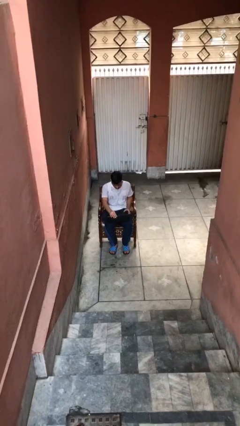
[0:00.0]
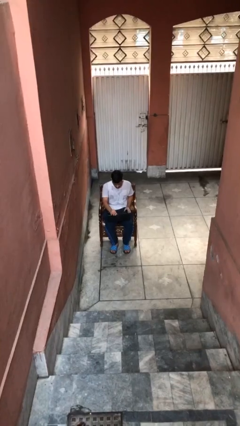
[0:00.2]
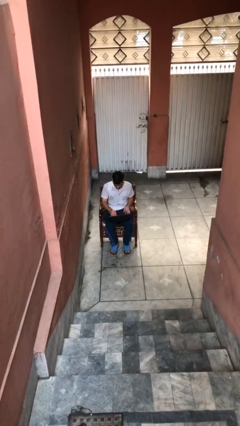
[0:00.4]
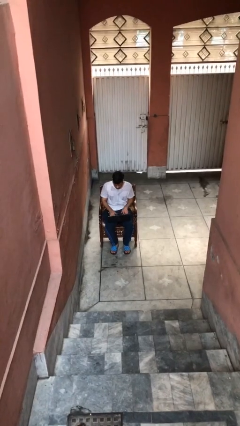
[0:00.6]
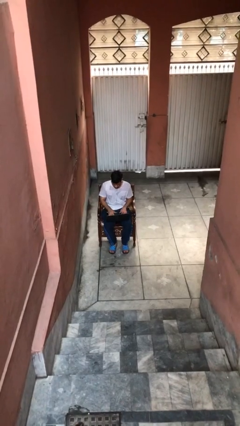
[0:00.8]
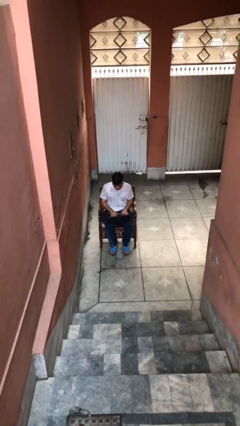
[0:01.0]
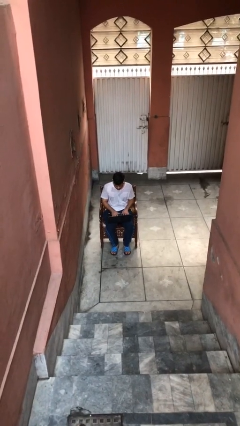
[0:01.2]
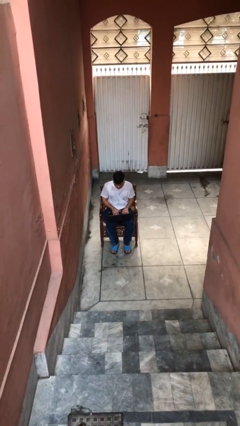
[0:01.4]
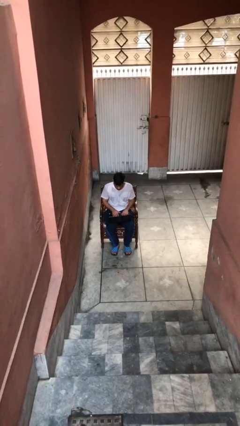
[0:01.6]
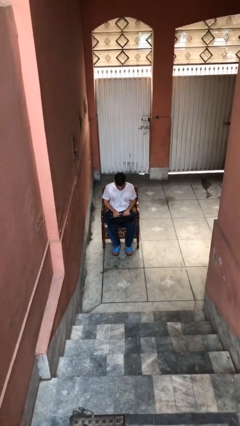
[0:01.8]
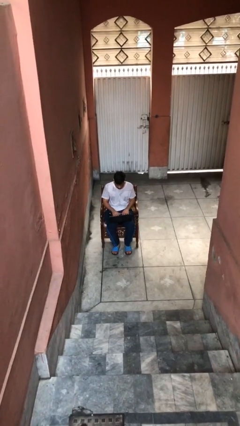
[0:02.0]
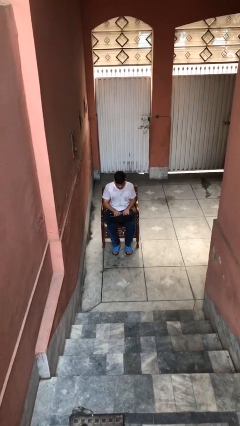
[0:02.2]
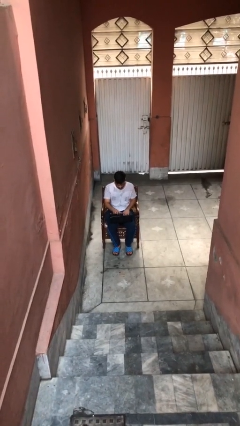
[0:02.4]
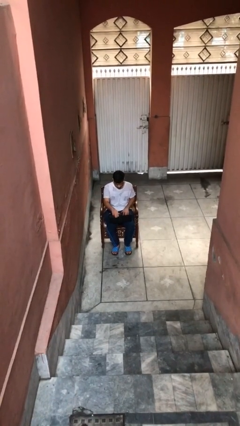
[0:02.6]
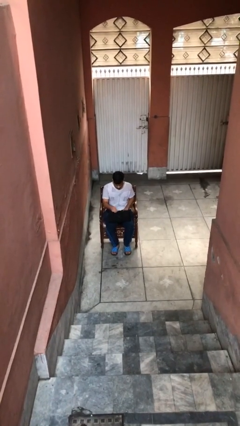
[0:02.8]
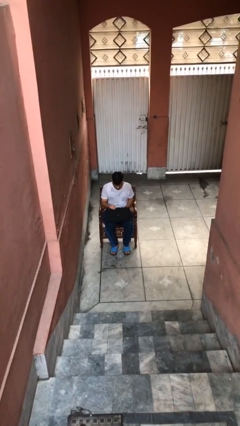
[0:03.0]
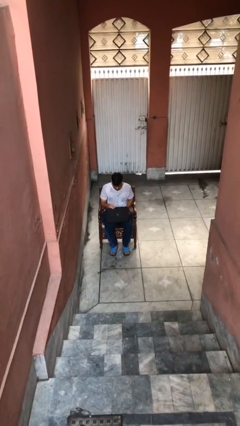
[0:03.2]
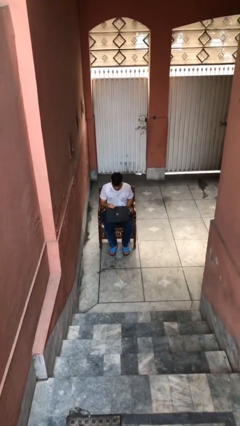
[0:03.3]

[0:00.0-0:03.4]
person interacts with laptop

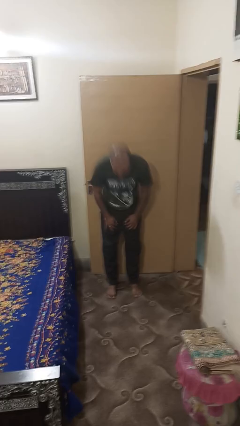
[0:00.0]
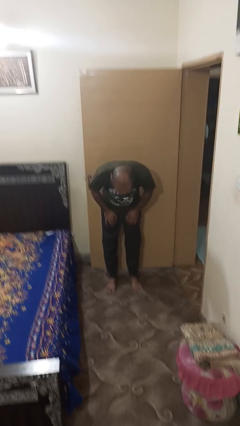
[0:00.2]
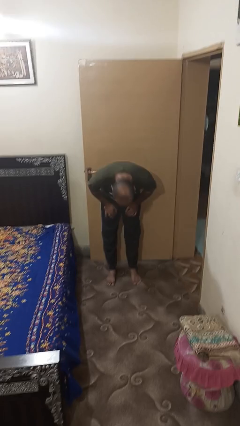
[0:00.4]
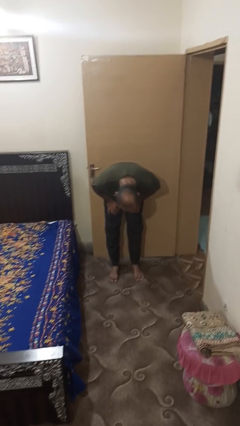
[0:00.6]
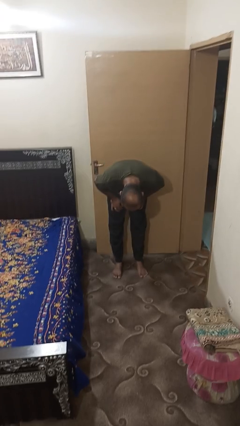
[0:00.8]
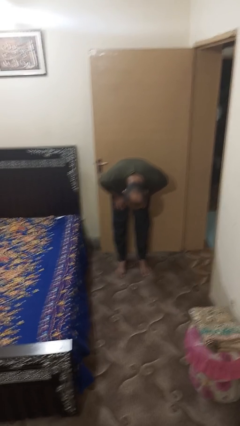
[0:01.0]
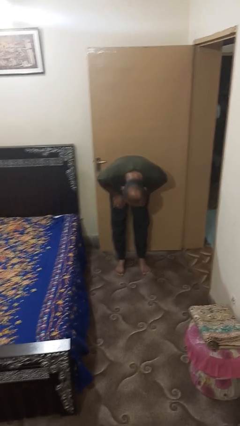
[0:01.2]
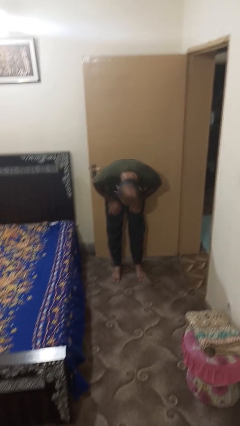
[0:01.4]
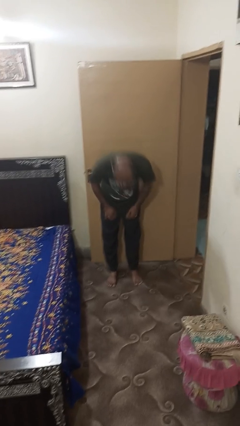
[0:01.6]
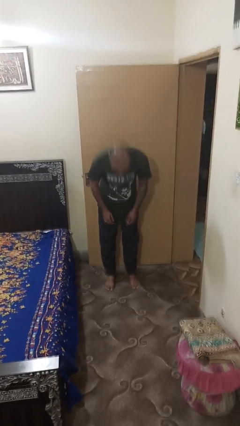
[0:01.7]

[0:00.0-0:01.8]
person bows

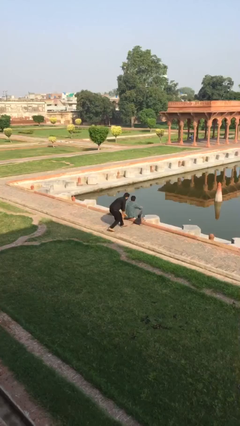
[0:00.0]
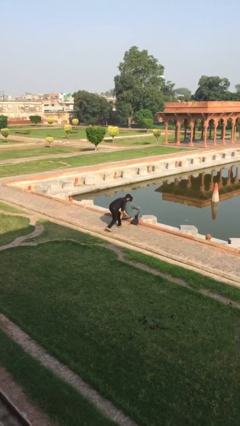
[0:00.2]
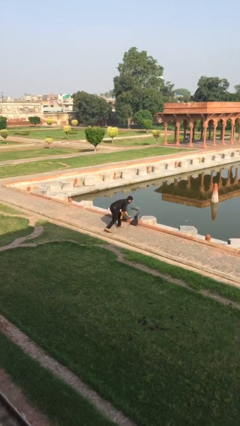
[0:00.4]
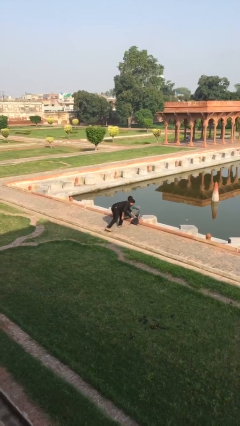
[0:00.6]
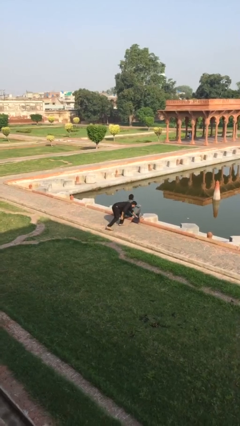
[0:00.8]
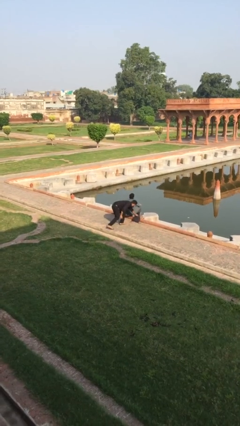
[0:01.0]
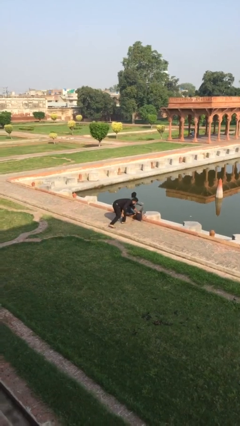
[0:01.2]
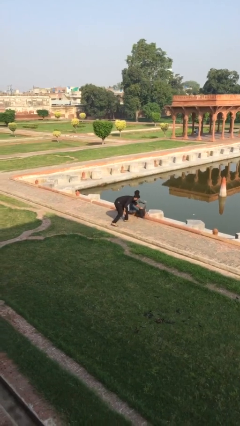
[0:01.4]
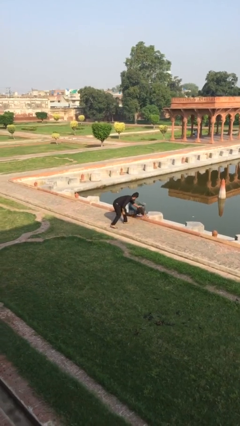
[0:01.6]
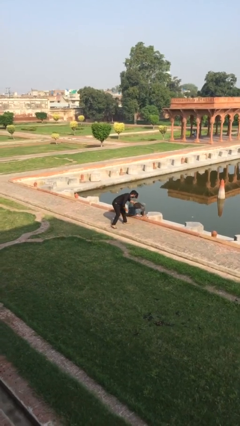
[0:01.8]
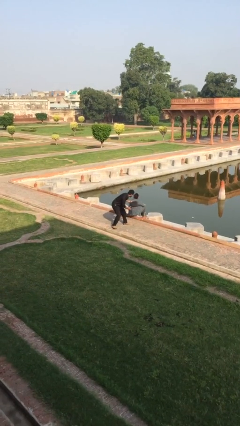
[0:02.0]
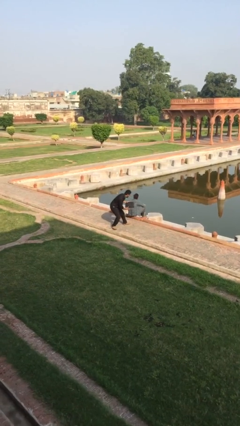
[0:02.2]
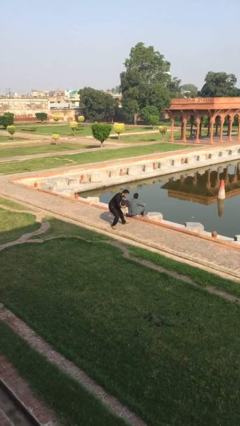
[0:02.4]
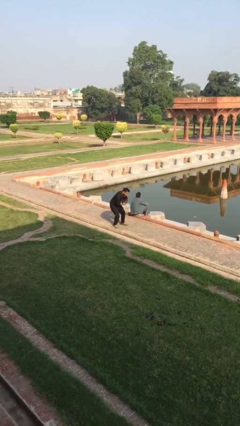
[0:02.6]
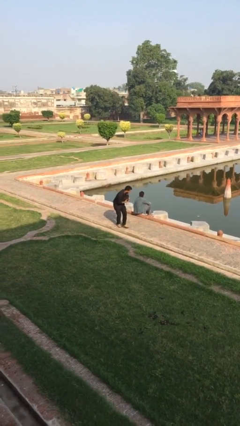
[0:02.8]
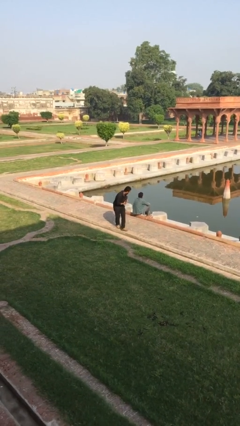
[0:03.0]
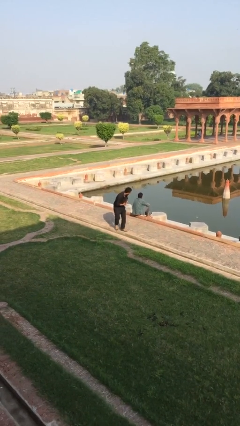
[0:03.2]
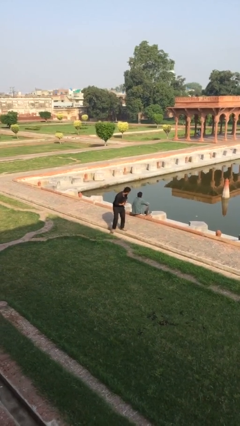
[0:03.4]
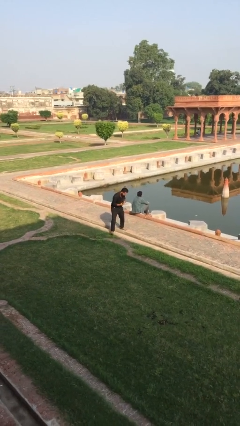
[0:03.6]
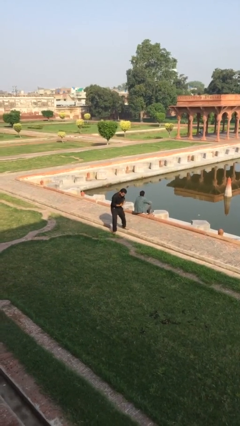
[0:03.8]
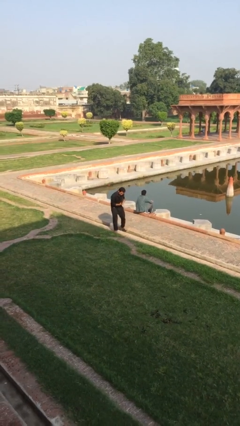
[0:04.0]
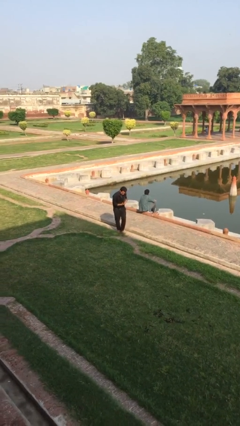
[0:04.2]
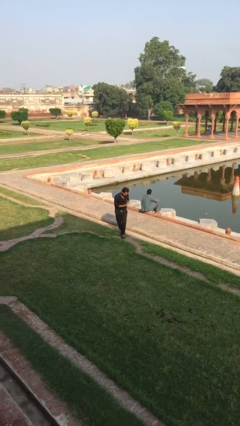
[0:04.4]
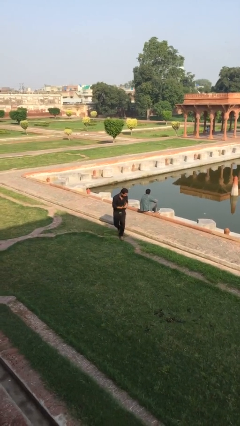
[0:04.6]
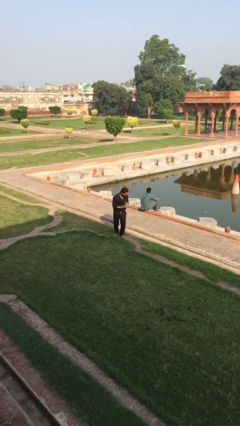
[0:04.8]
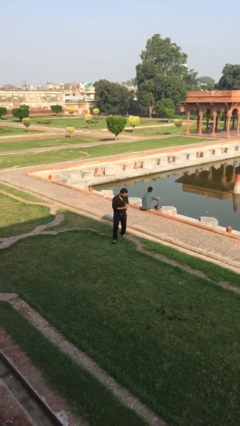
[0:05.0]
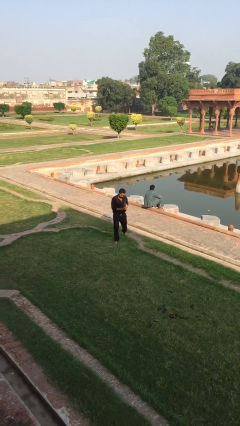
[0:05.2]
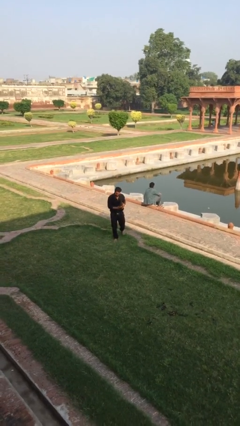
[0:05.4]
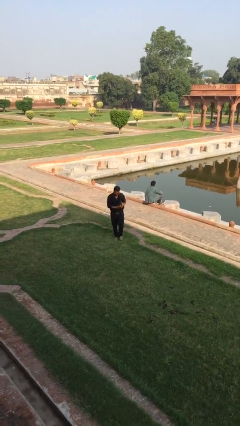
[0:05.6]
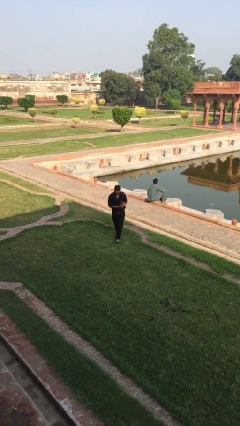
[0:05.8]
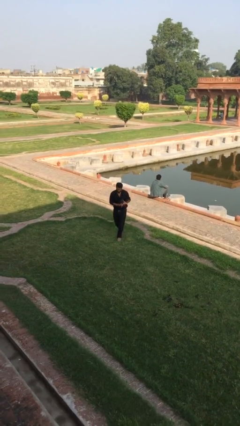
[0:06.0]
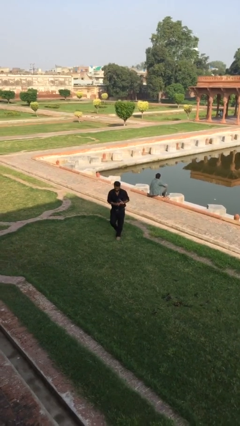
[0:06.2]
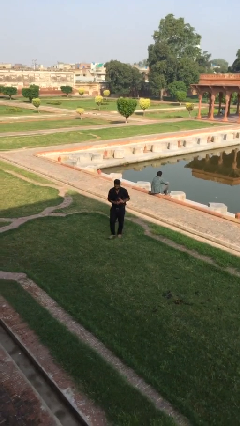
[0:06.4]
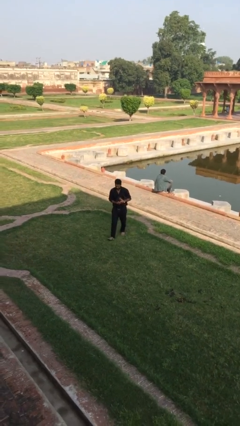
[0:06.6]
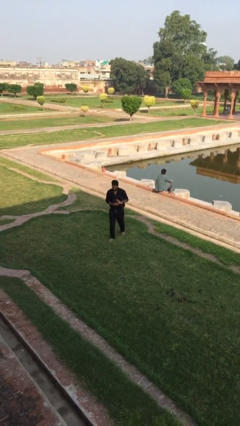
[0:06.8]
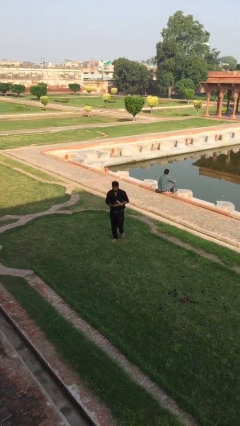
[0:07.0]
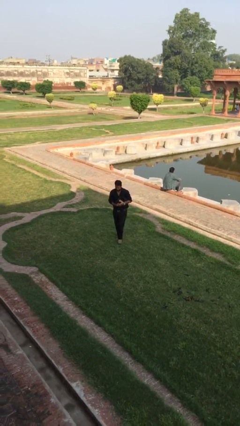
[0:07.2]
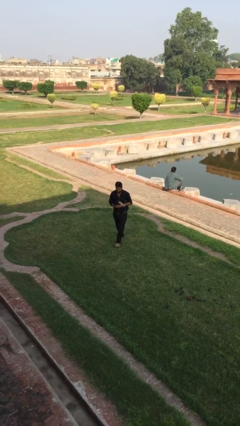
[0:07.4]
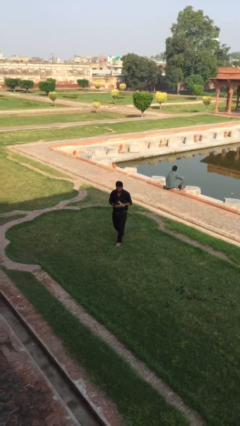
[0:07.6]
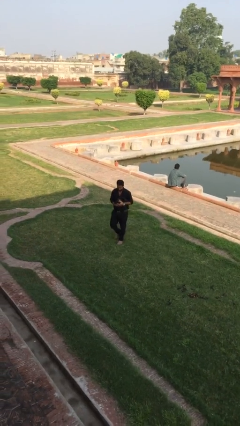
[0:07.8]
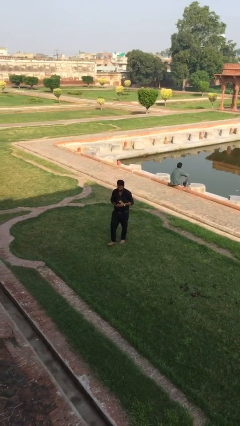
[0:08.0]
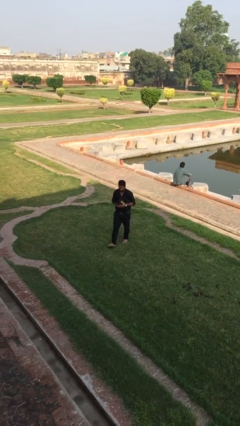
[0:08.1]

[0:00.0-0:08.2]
person steals object from person

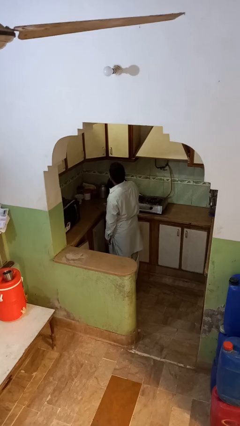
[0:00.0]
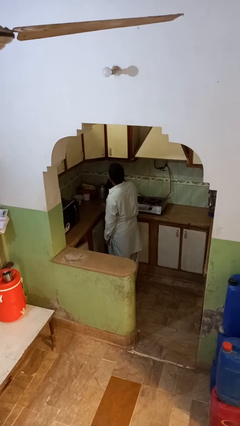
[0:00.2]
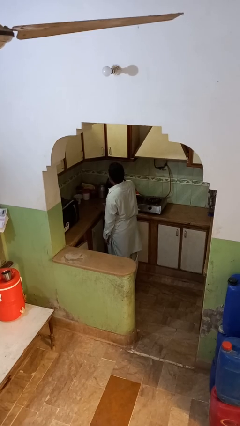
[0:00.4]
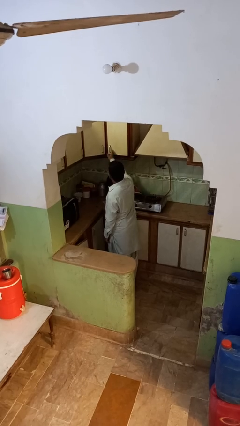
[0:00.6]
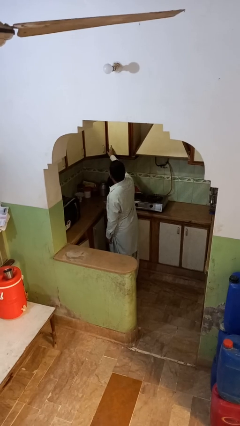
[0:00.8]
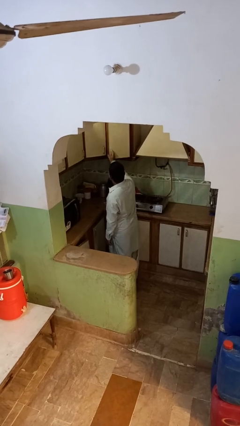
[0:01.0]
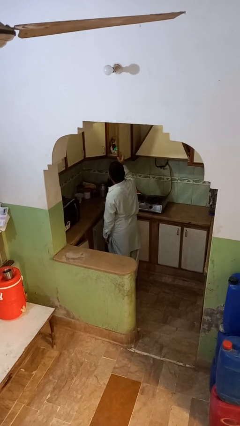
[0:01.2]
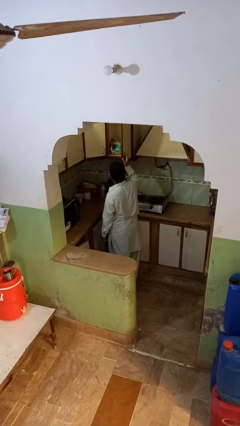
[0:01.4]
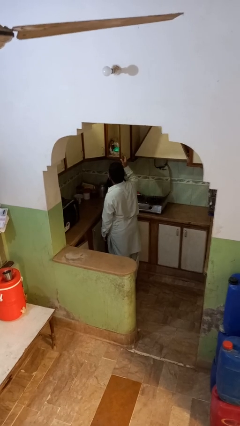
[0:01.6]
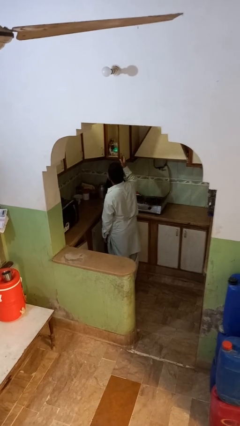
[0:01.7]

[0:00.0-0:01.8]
person opens cabinet

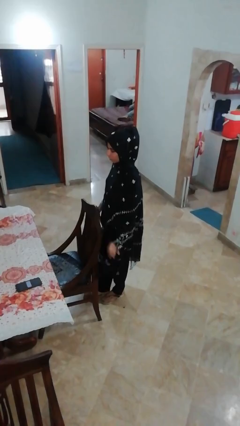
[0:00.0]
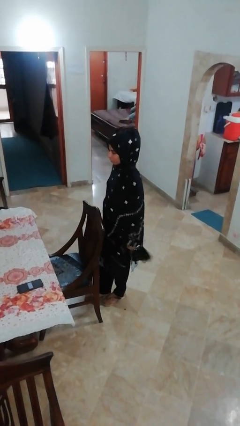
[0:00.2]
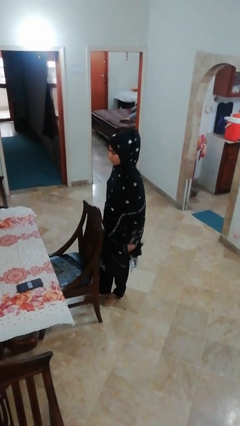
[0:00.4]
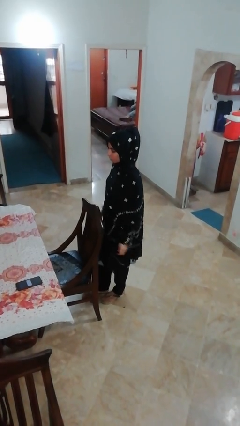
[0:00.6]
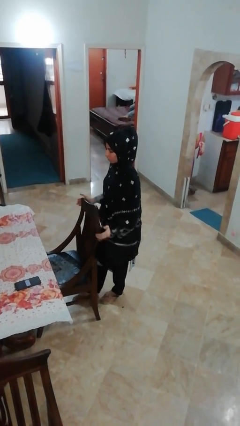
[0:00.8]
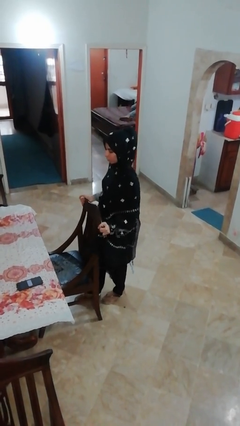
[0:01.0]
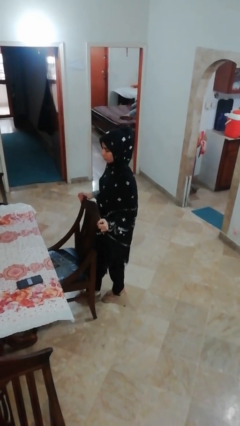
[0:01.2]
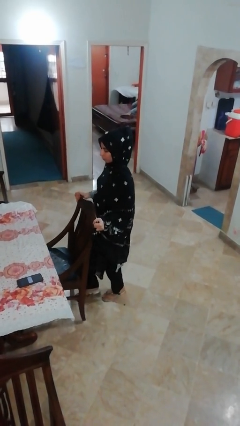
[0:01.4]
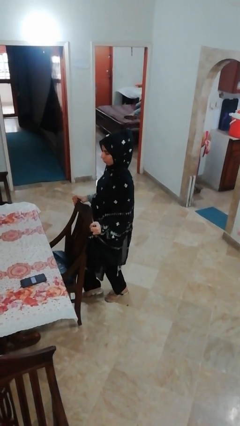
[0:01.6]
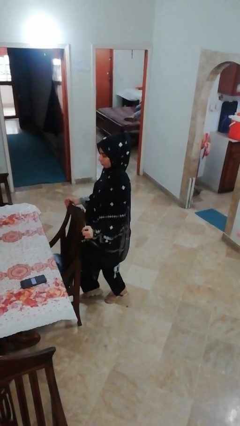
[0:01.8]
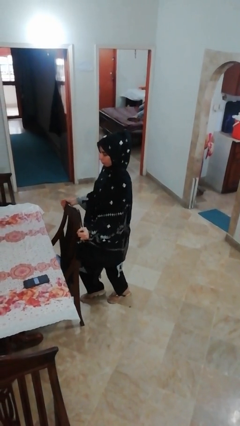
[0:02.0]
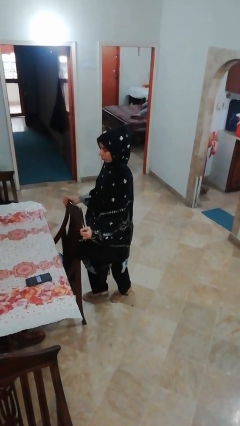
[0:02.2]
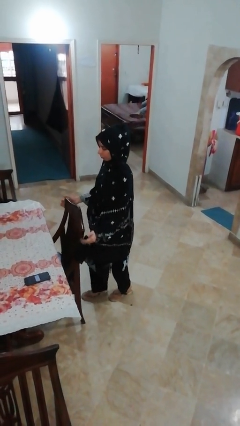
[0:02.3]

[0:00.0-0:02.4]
person pushes in chair
